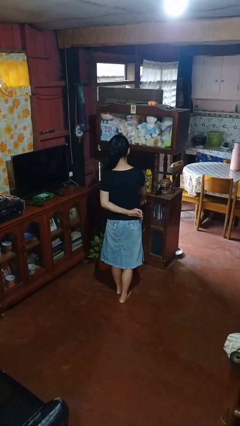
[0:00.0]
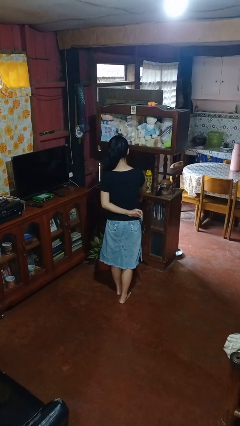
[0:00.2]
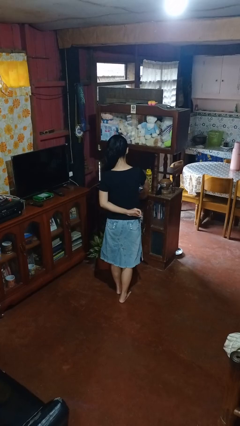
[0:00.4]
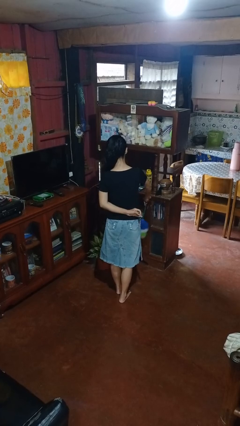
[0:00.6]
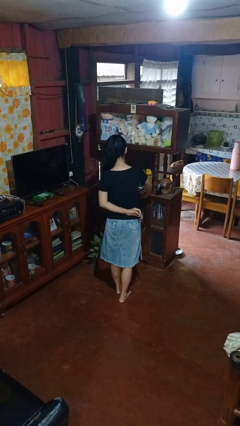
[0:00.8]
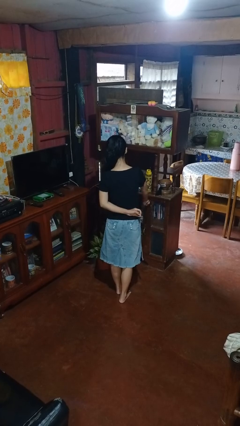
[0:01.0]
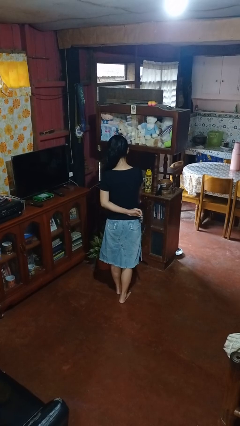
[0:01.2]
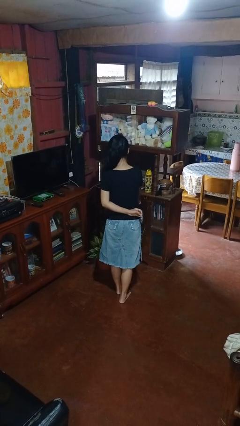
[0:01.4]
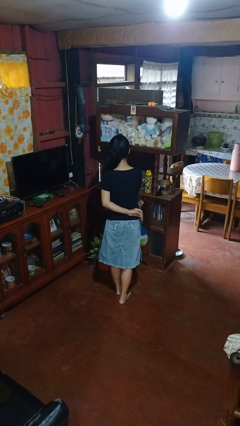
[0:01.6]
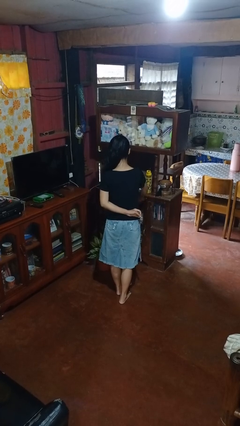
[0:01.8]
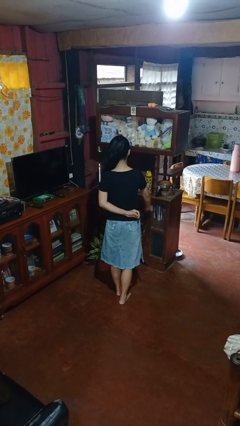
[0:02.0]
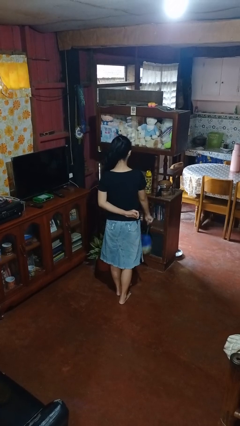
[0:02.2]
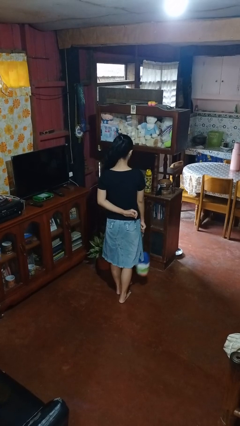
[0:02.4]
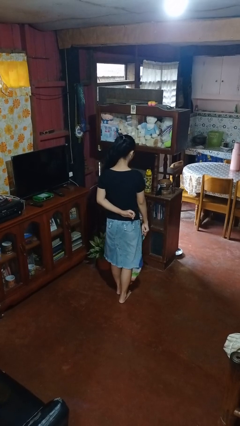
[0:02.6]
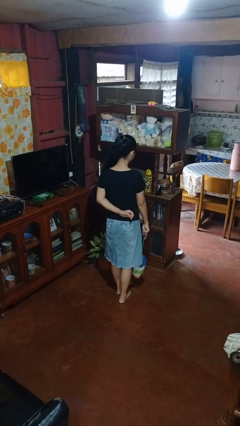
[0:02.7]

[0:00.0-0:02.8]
person dusts furniture

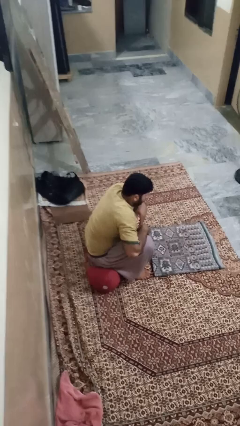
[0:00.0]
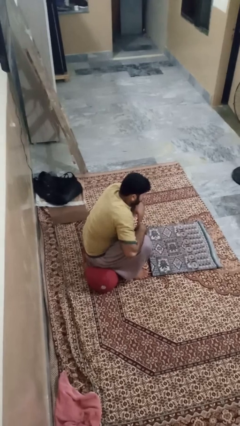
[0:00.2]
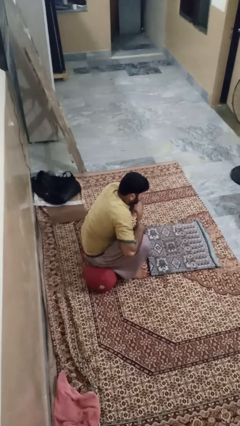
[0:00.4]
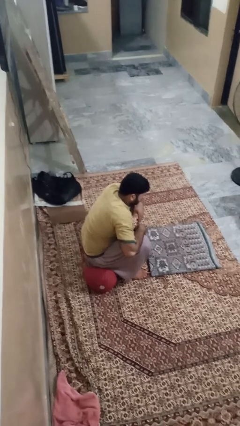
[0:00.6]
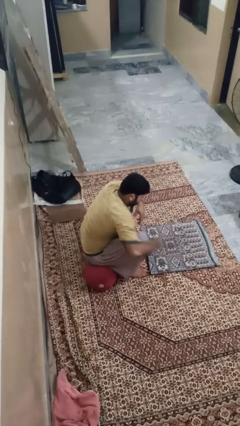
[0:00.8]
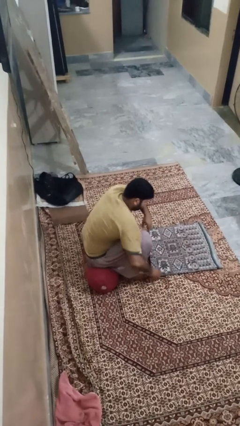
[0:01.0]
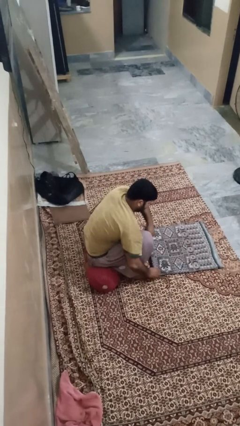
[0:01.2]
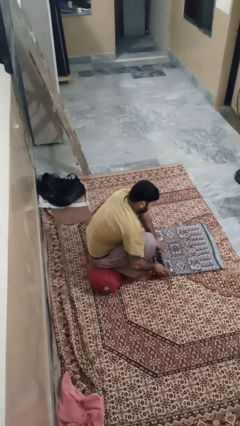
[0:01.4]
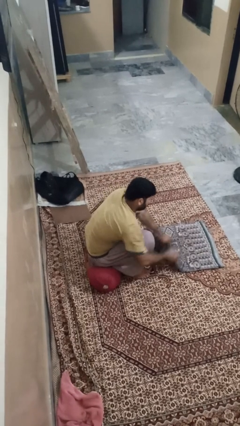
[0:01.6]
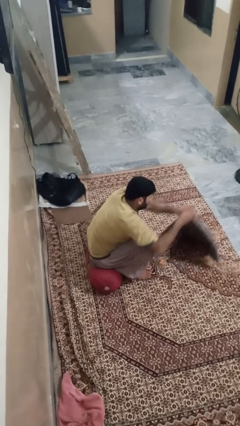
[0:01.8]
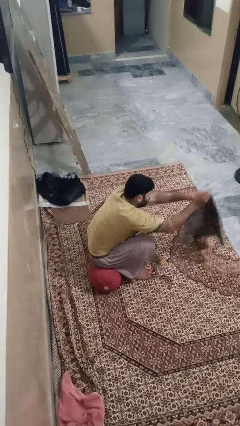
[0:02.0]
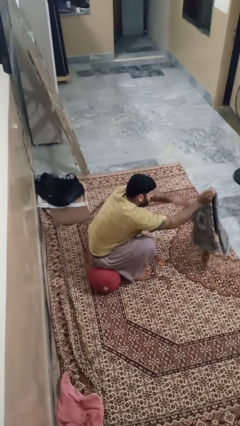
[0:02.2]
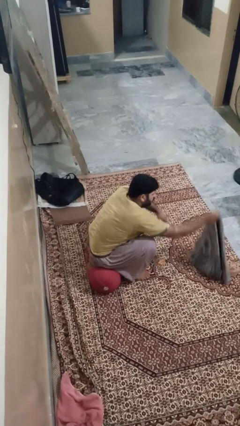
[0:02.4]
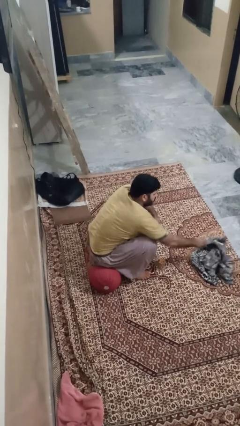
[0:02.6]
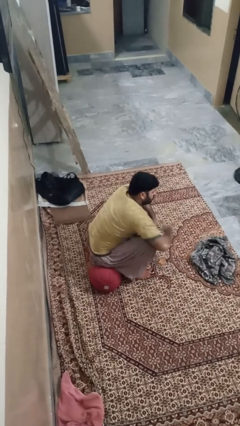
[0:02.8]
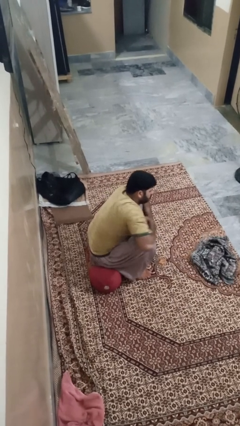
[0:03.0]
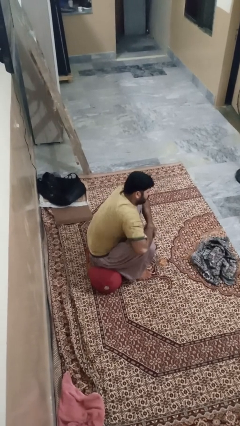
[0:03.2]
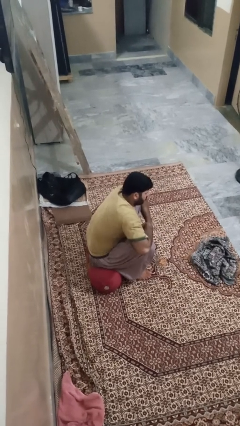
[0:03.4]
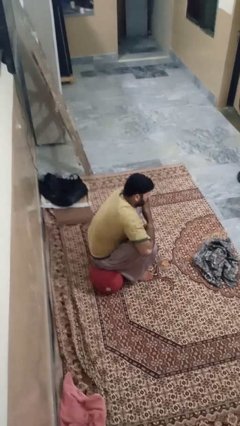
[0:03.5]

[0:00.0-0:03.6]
person unfolds blanket

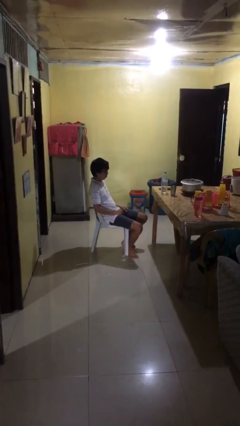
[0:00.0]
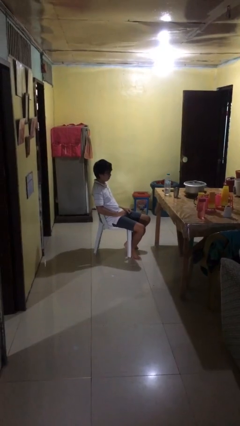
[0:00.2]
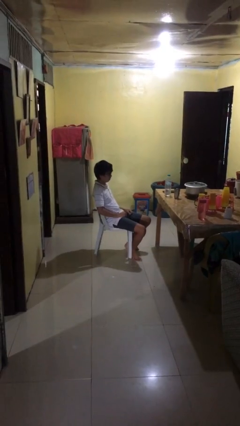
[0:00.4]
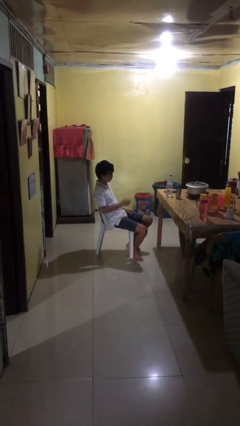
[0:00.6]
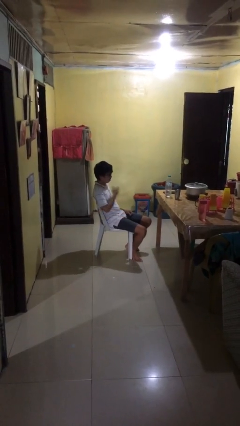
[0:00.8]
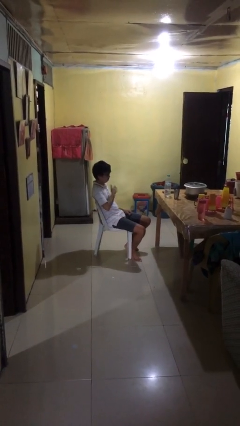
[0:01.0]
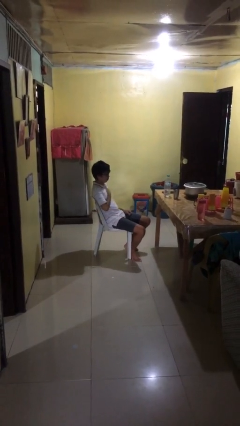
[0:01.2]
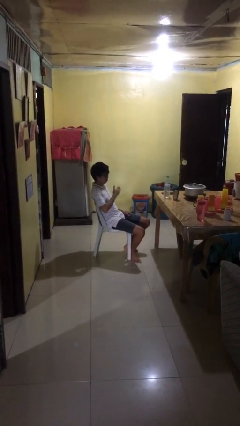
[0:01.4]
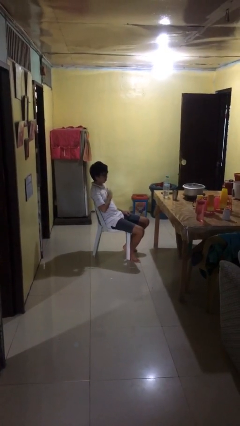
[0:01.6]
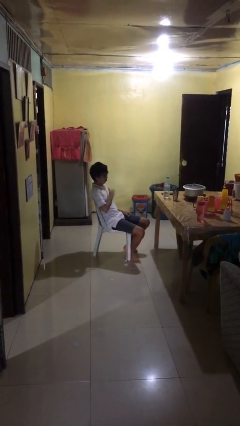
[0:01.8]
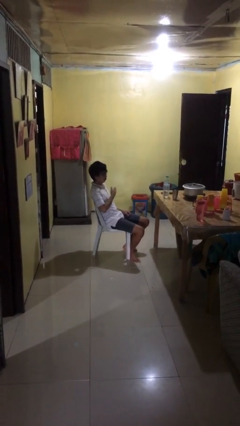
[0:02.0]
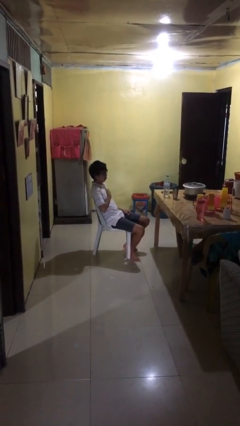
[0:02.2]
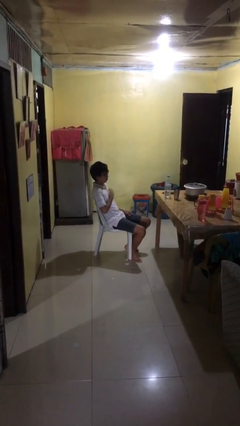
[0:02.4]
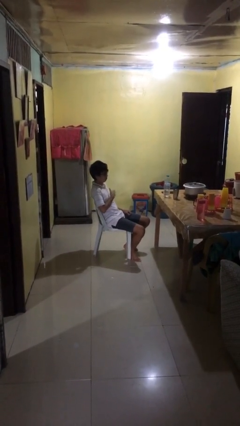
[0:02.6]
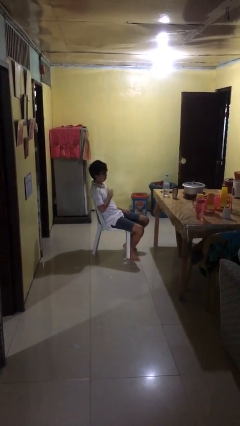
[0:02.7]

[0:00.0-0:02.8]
person drums on chest

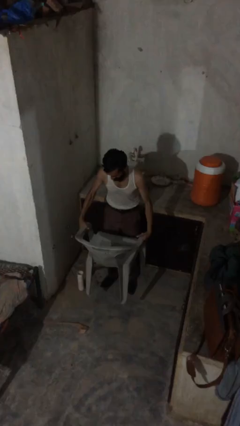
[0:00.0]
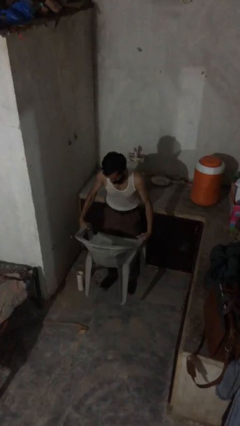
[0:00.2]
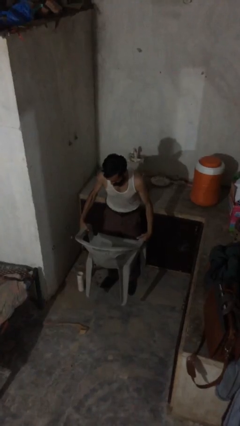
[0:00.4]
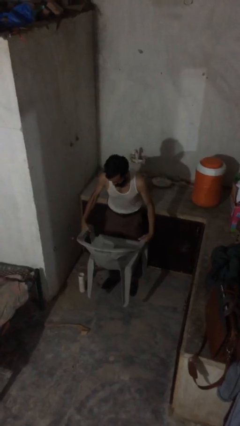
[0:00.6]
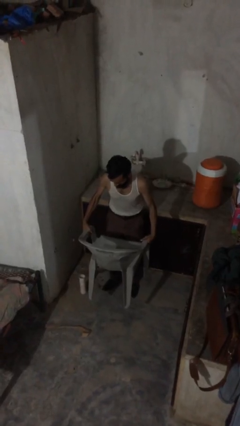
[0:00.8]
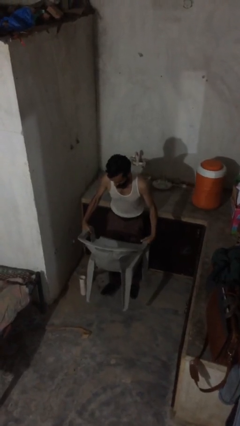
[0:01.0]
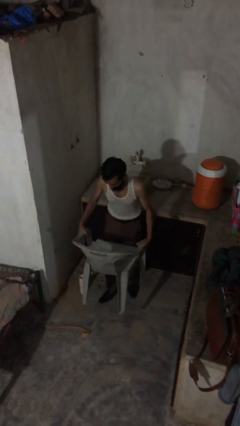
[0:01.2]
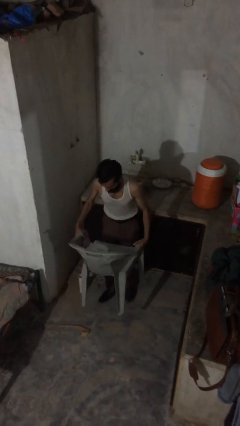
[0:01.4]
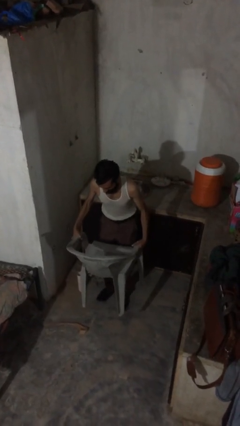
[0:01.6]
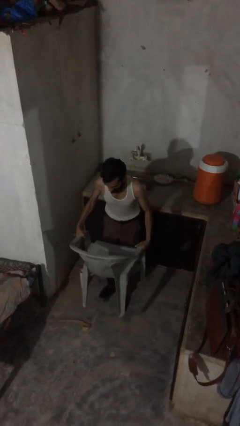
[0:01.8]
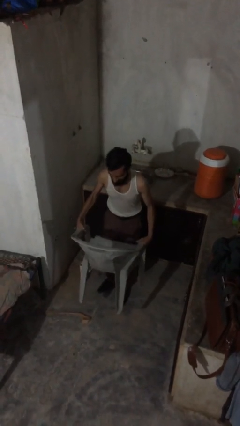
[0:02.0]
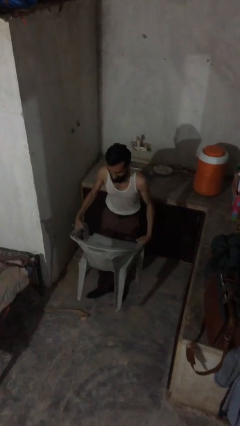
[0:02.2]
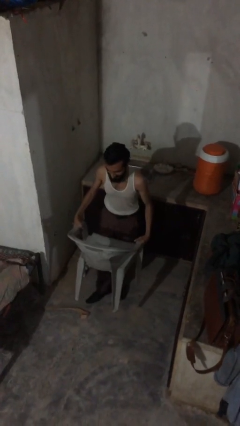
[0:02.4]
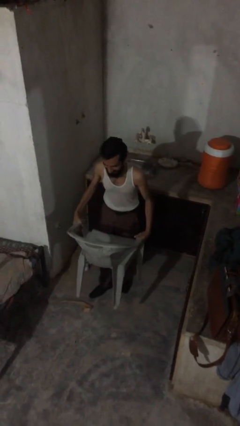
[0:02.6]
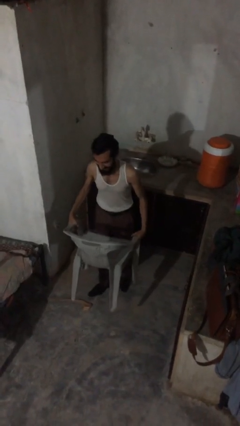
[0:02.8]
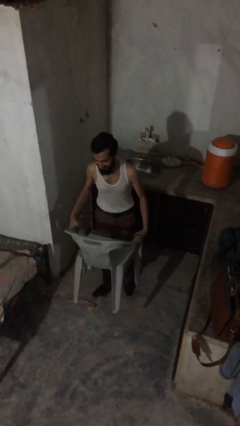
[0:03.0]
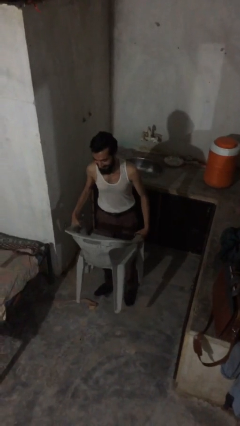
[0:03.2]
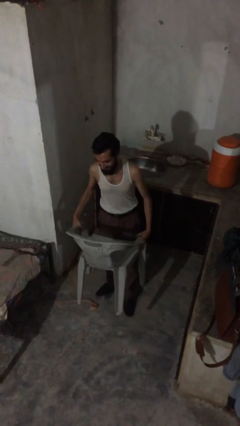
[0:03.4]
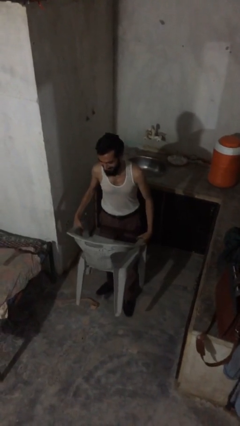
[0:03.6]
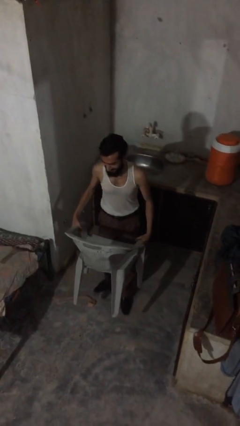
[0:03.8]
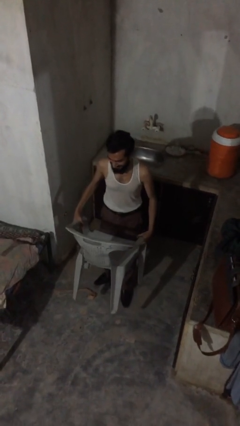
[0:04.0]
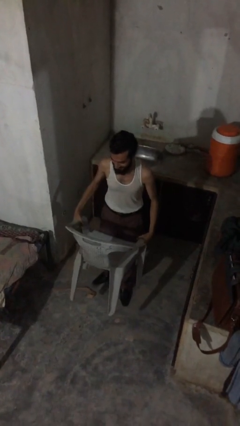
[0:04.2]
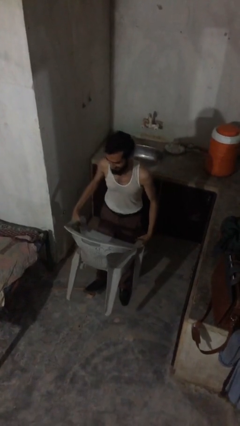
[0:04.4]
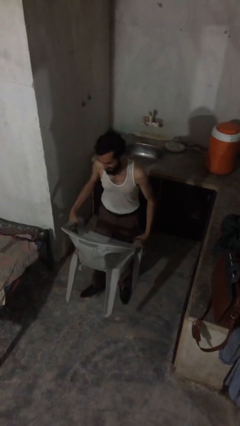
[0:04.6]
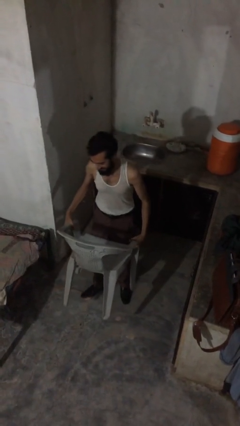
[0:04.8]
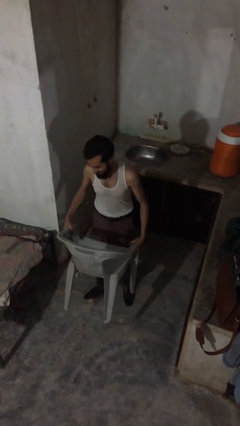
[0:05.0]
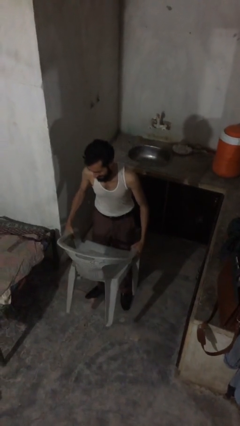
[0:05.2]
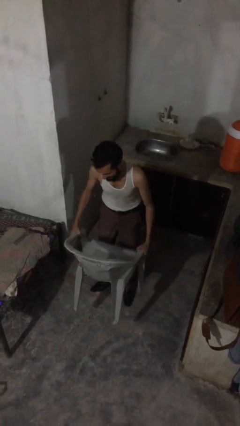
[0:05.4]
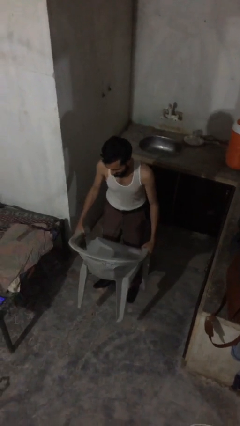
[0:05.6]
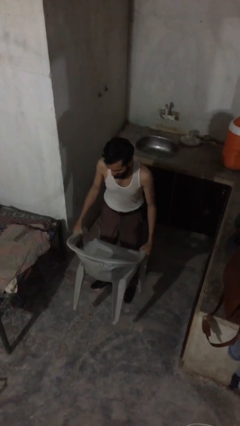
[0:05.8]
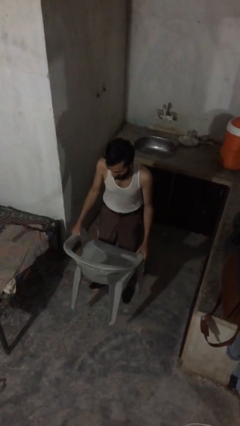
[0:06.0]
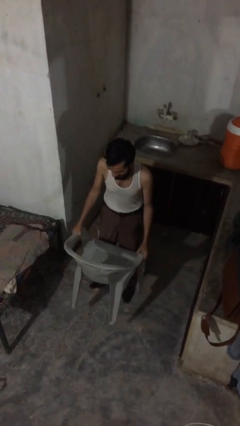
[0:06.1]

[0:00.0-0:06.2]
person carries heavy object

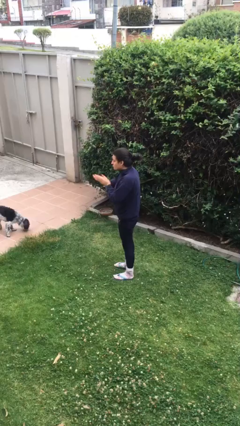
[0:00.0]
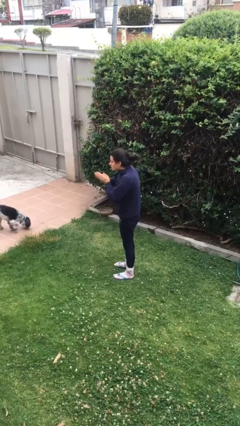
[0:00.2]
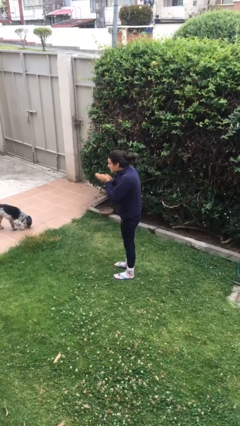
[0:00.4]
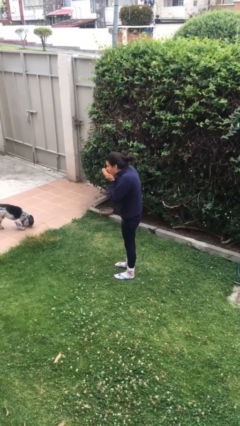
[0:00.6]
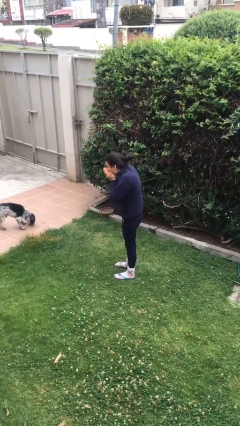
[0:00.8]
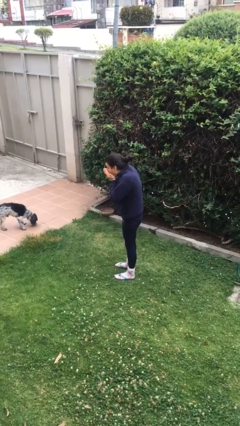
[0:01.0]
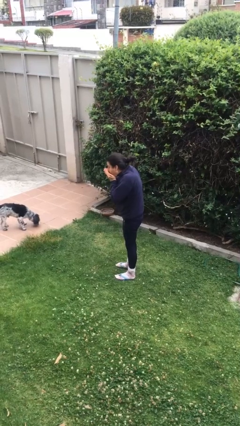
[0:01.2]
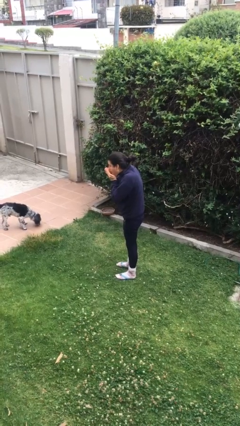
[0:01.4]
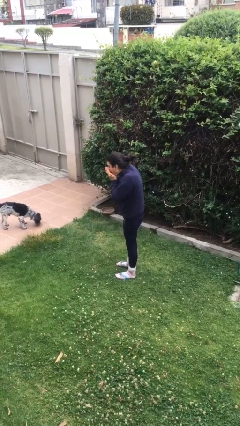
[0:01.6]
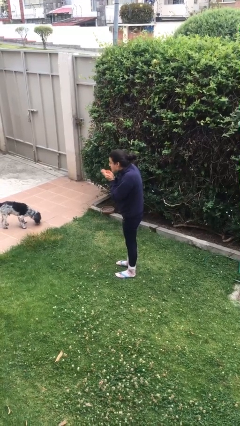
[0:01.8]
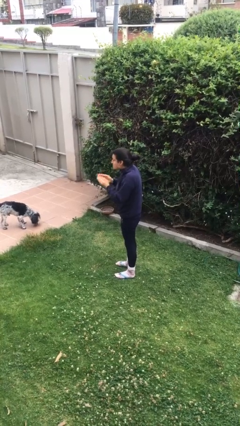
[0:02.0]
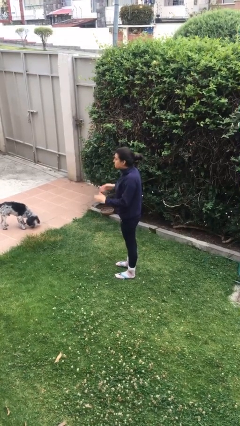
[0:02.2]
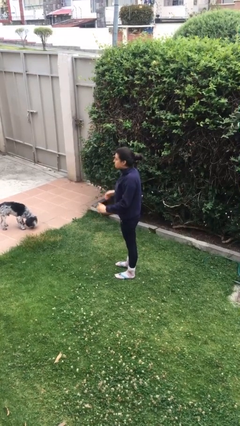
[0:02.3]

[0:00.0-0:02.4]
person blows into hands
